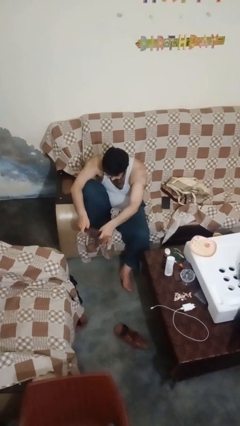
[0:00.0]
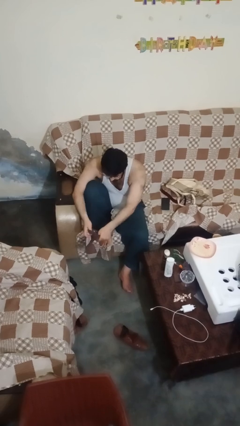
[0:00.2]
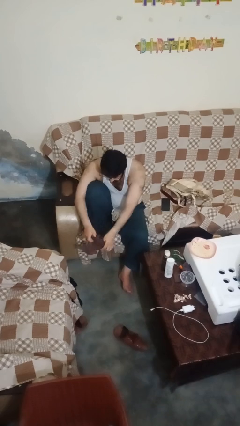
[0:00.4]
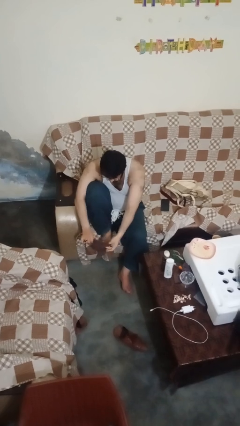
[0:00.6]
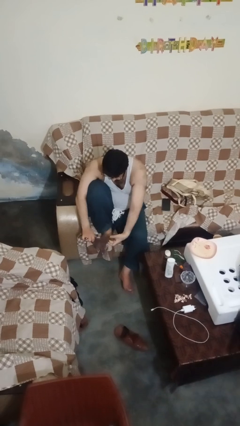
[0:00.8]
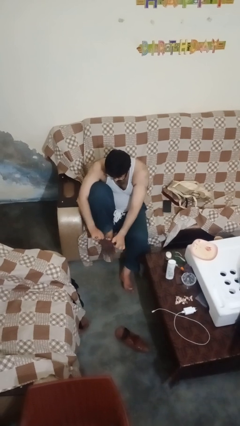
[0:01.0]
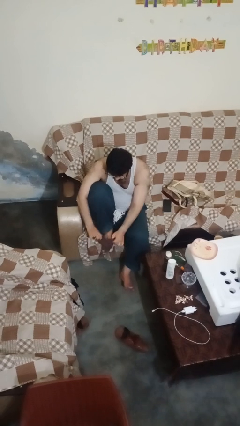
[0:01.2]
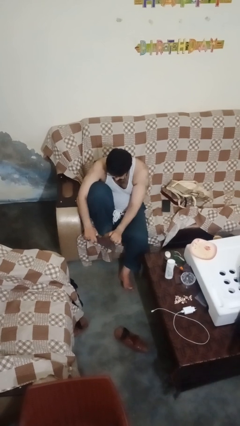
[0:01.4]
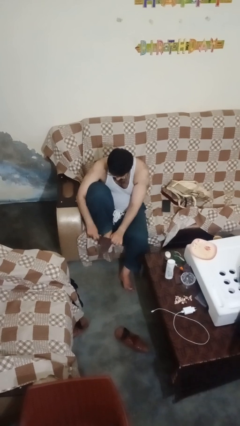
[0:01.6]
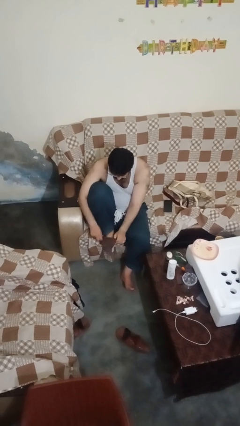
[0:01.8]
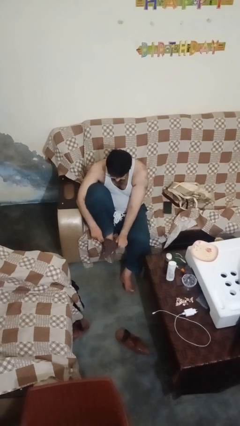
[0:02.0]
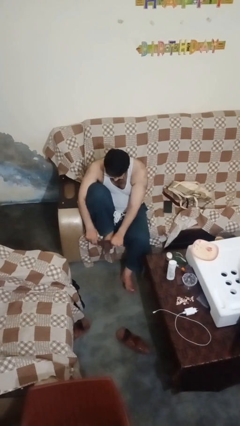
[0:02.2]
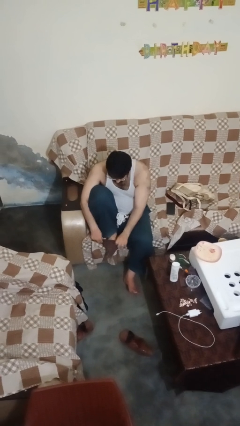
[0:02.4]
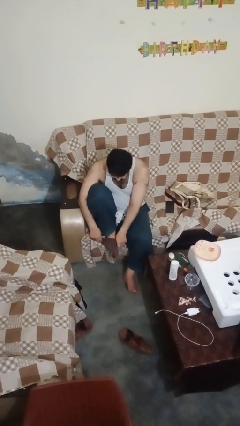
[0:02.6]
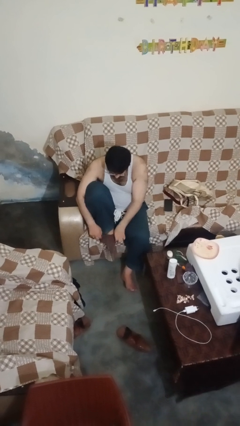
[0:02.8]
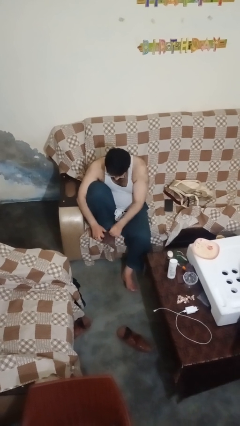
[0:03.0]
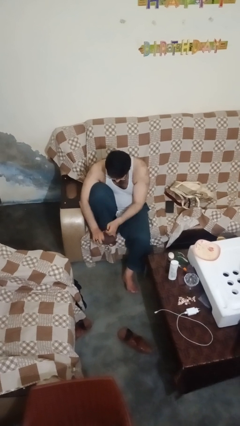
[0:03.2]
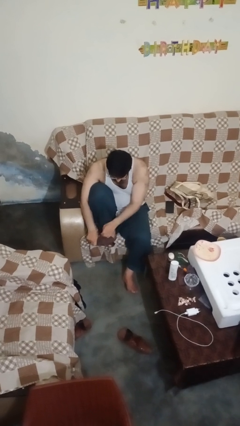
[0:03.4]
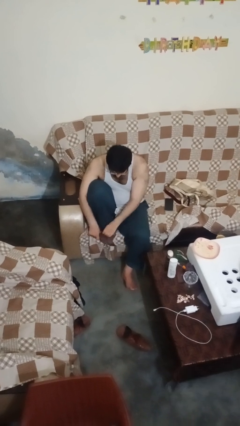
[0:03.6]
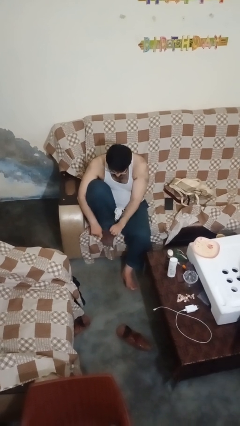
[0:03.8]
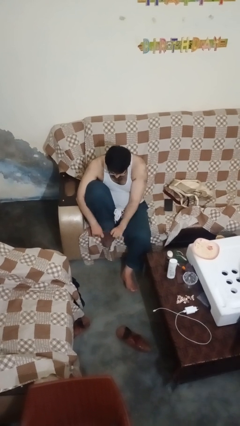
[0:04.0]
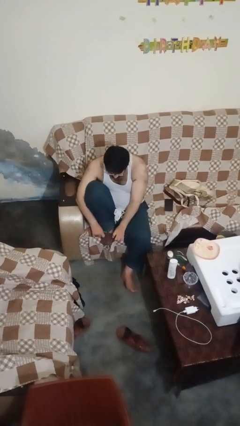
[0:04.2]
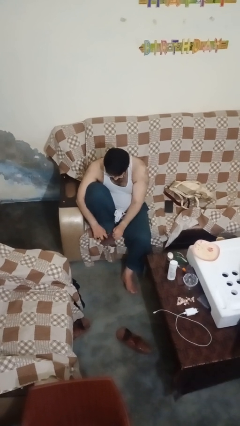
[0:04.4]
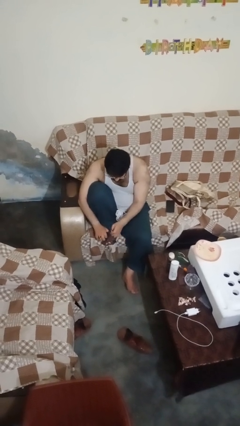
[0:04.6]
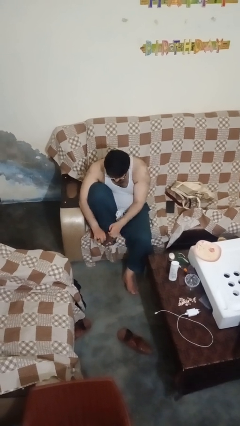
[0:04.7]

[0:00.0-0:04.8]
person puts on socks

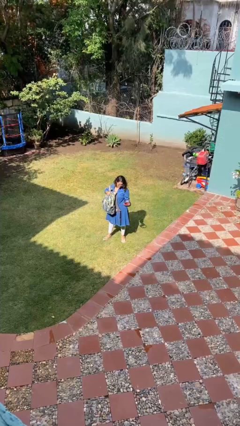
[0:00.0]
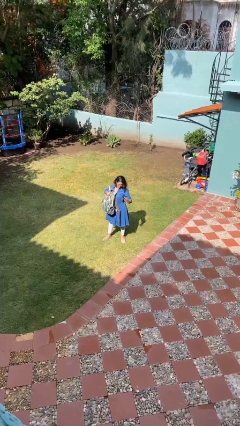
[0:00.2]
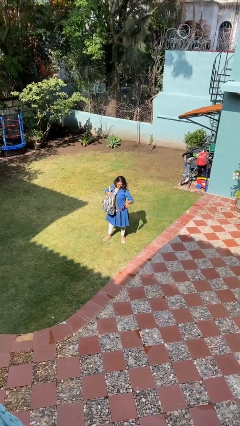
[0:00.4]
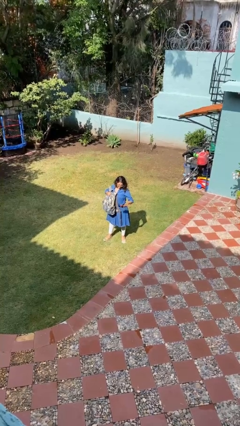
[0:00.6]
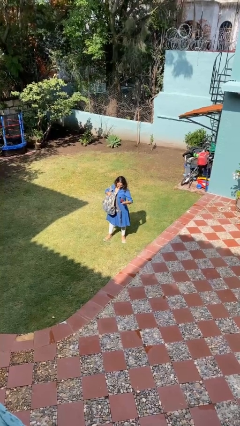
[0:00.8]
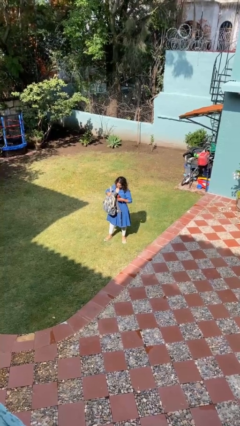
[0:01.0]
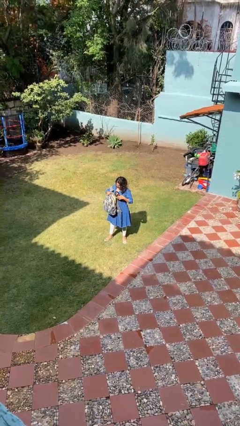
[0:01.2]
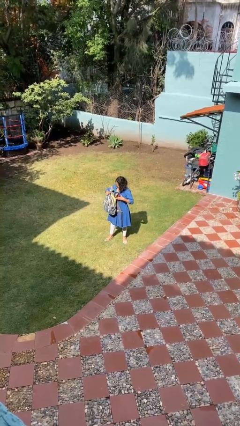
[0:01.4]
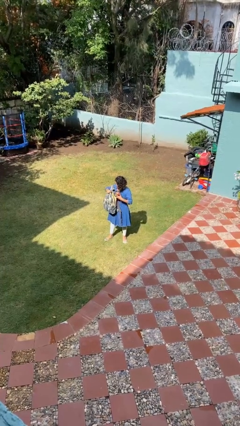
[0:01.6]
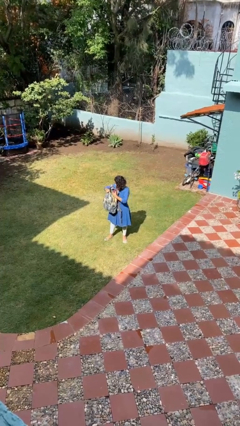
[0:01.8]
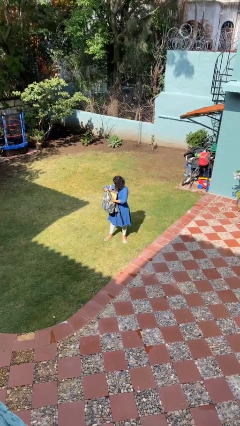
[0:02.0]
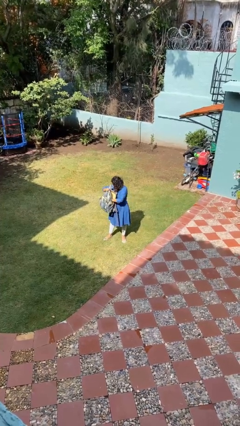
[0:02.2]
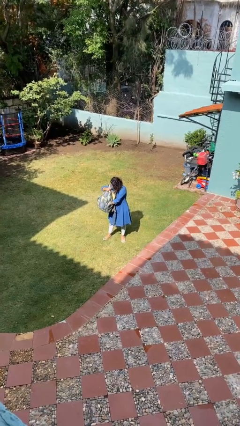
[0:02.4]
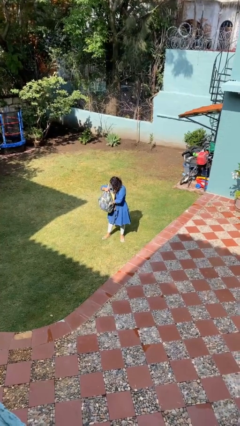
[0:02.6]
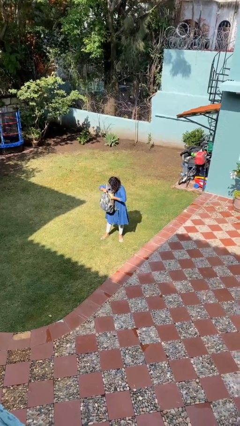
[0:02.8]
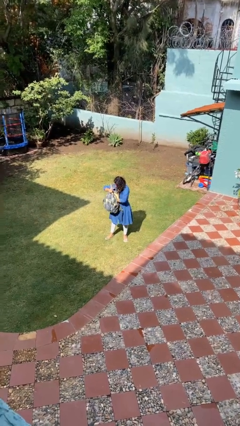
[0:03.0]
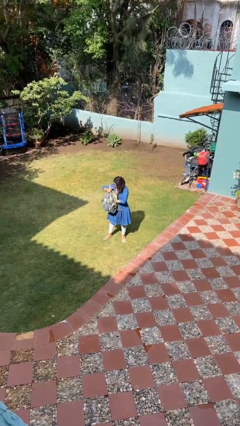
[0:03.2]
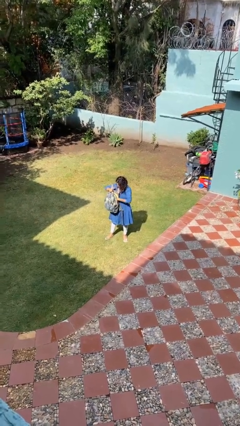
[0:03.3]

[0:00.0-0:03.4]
person puts object into backpack

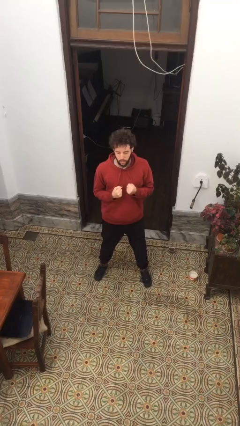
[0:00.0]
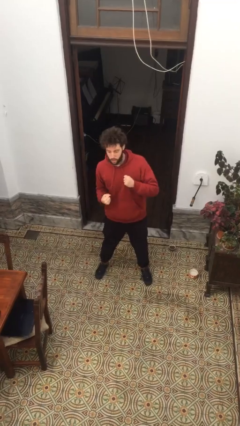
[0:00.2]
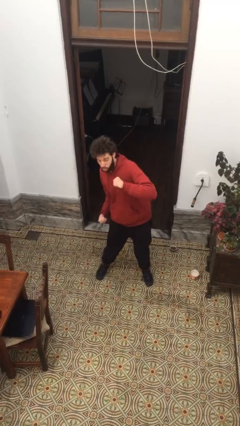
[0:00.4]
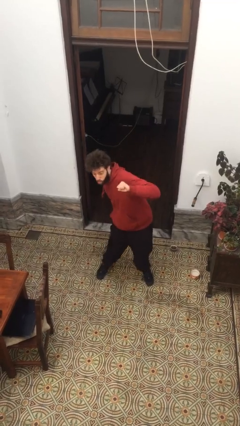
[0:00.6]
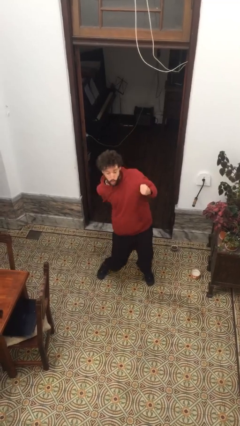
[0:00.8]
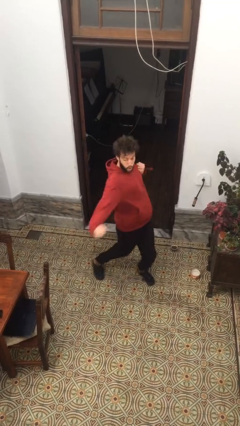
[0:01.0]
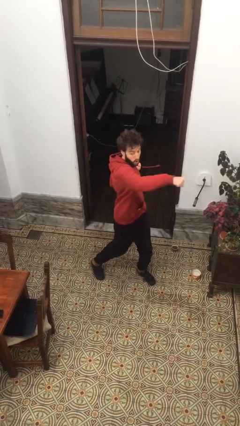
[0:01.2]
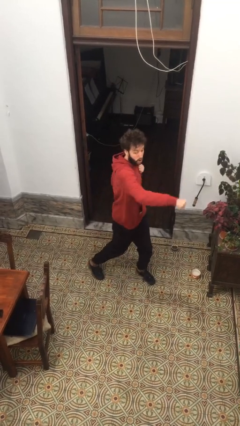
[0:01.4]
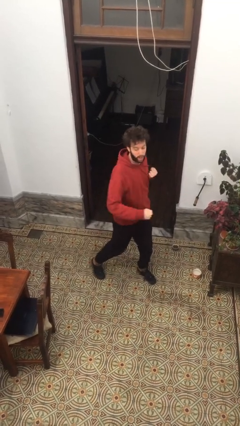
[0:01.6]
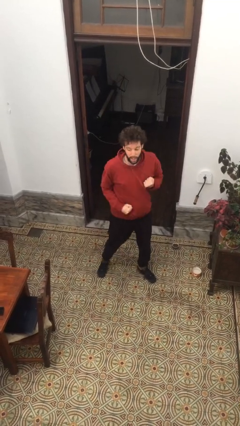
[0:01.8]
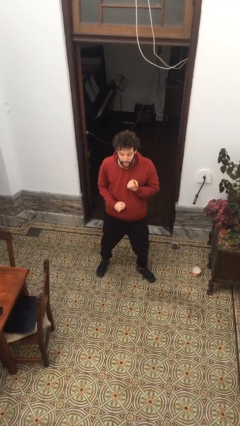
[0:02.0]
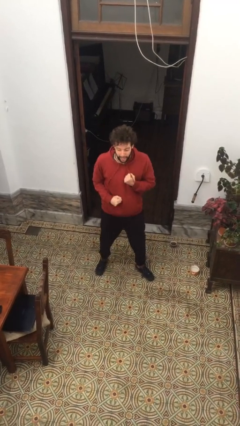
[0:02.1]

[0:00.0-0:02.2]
person punches

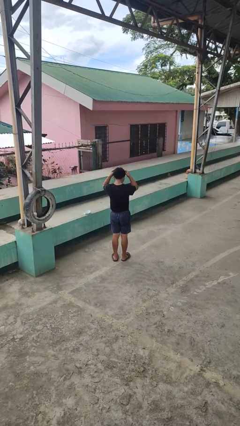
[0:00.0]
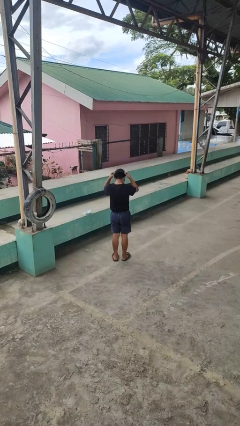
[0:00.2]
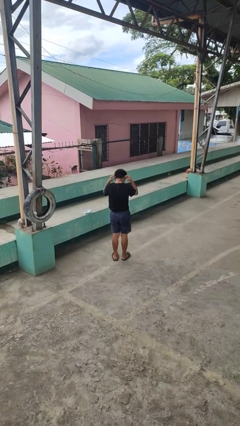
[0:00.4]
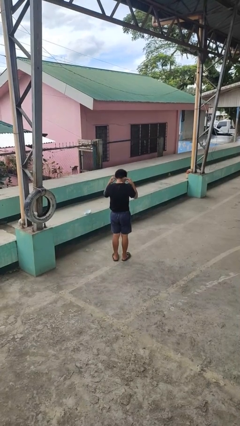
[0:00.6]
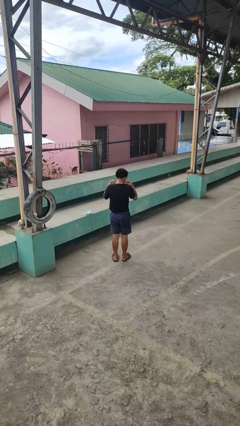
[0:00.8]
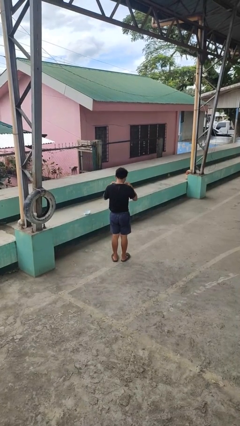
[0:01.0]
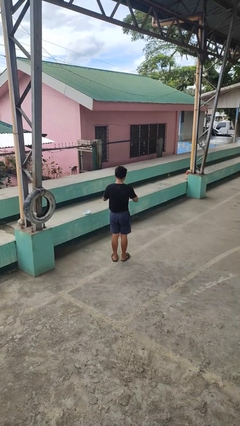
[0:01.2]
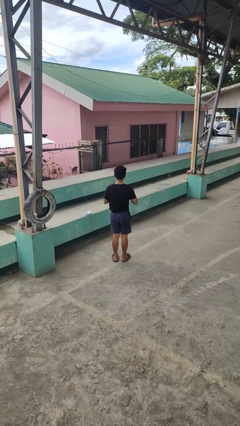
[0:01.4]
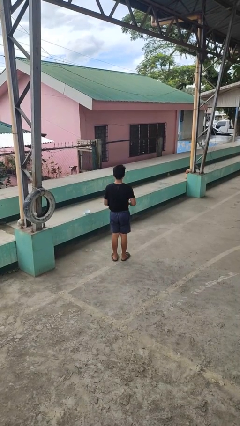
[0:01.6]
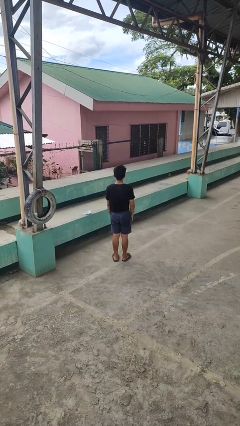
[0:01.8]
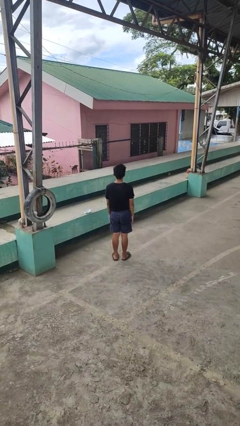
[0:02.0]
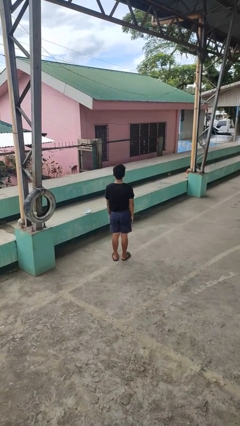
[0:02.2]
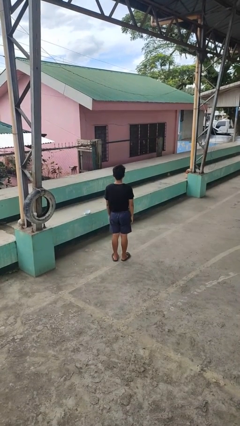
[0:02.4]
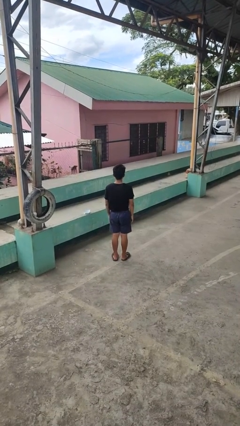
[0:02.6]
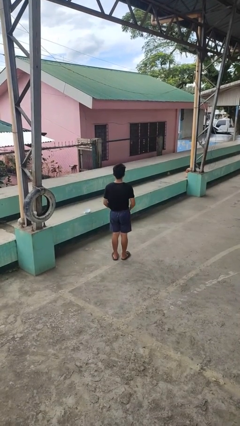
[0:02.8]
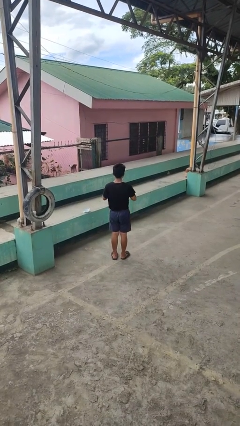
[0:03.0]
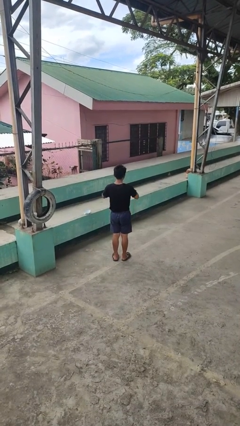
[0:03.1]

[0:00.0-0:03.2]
person puts on necklace

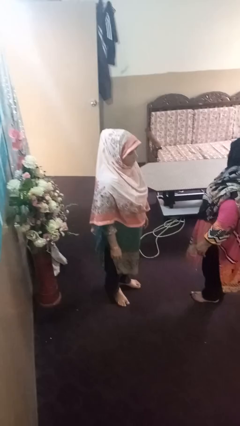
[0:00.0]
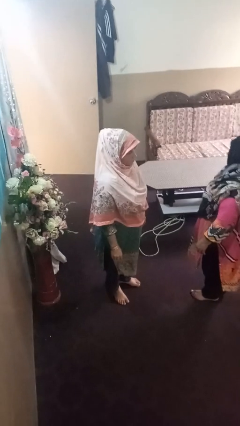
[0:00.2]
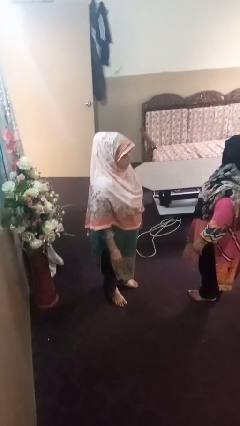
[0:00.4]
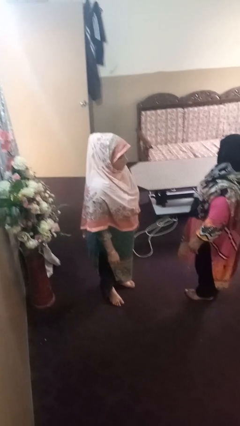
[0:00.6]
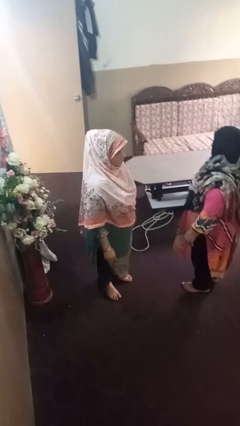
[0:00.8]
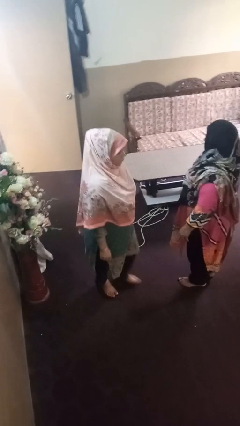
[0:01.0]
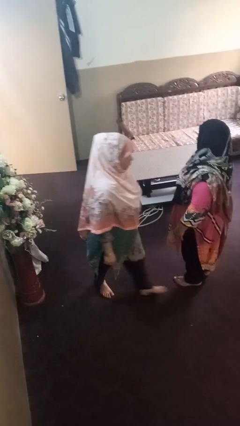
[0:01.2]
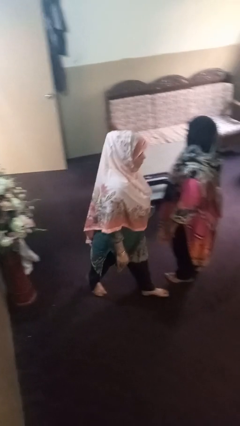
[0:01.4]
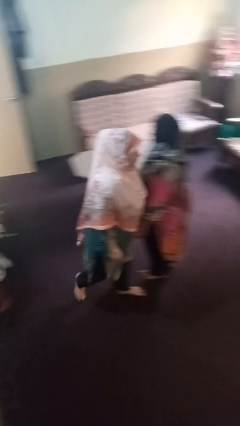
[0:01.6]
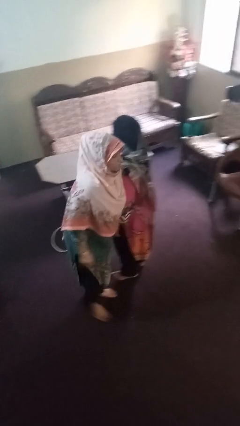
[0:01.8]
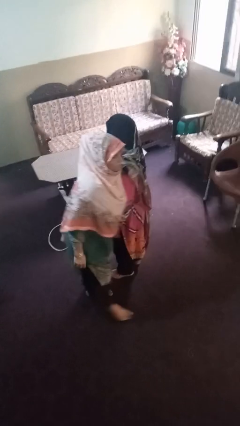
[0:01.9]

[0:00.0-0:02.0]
person shoves person

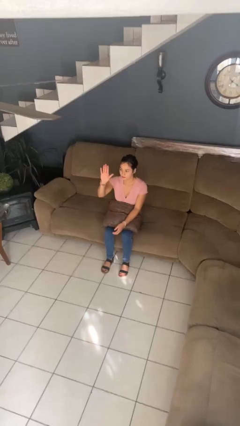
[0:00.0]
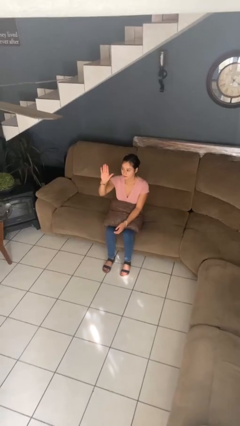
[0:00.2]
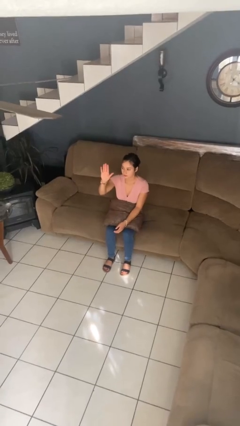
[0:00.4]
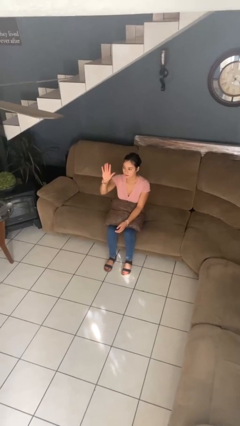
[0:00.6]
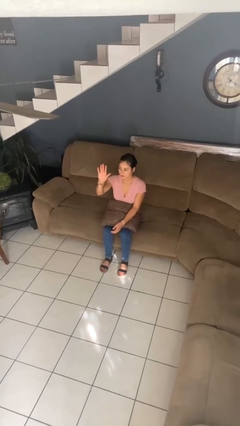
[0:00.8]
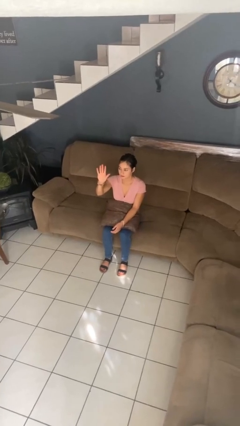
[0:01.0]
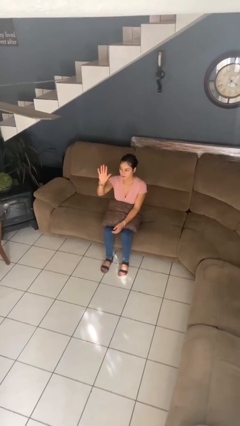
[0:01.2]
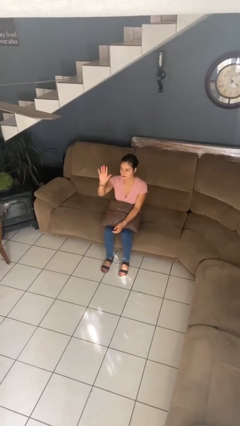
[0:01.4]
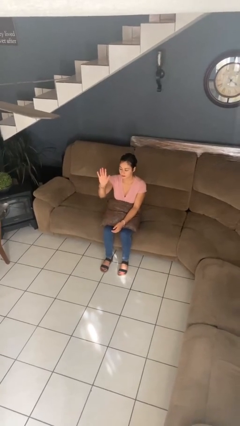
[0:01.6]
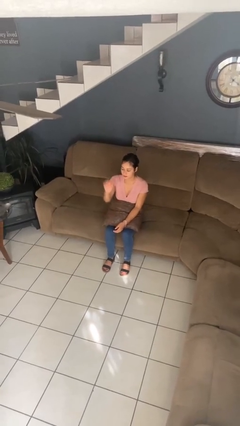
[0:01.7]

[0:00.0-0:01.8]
person gestures stop
